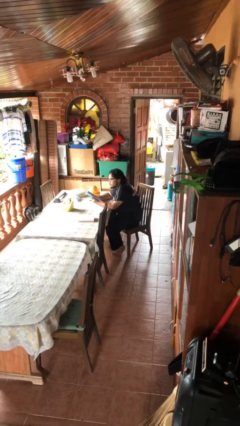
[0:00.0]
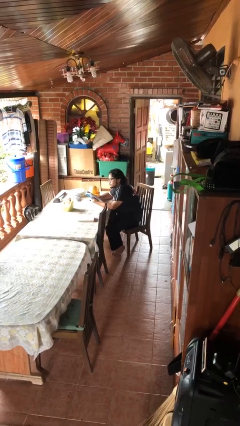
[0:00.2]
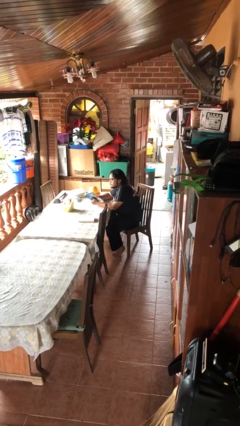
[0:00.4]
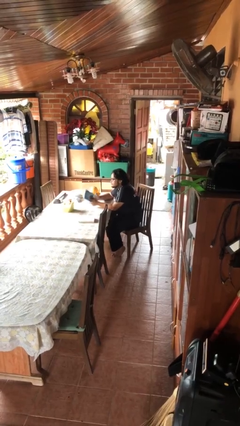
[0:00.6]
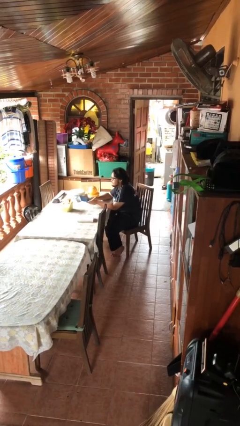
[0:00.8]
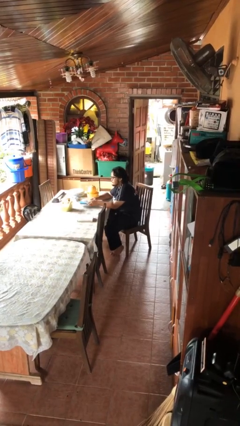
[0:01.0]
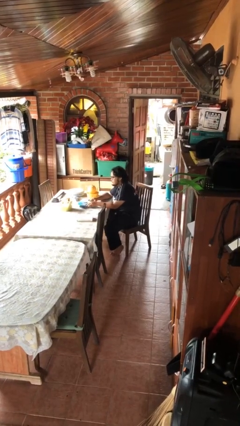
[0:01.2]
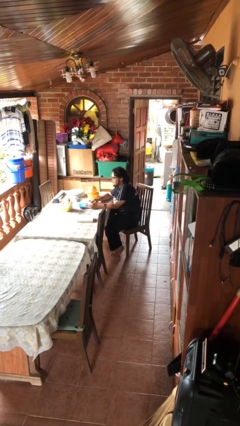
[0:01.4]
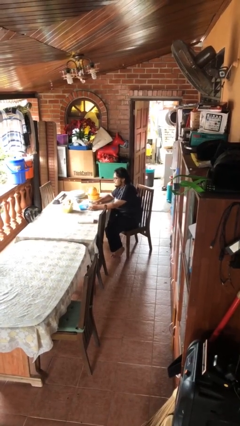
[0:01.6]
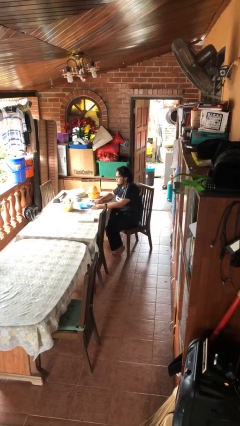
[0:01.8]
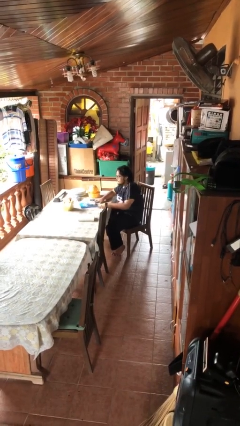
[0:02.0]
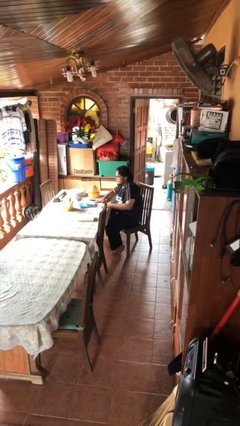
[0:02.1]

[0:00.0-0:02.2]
person puts down object on table

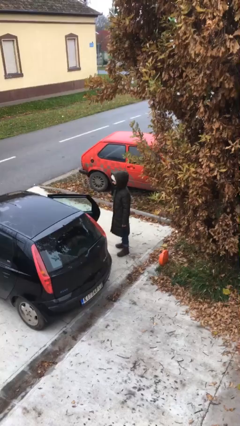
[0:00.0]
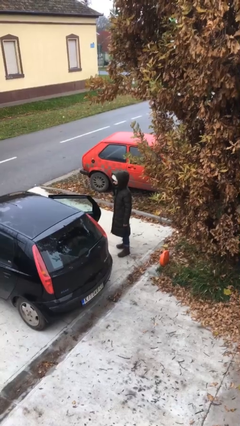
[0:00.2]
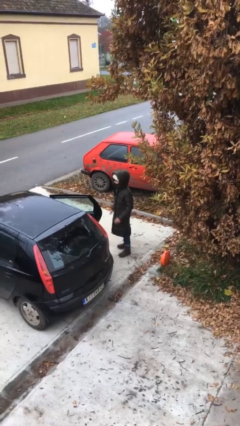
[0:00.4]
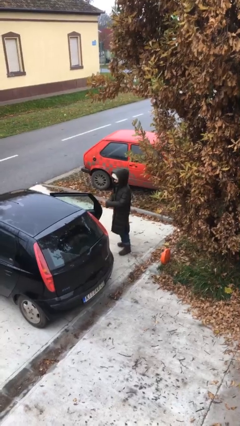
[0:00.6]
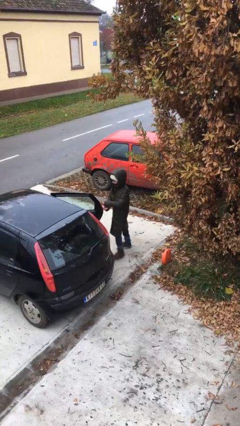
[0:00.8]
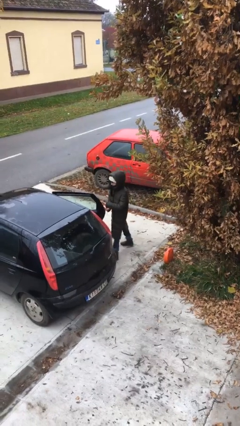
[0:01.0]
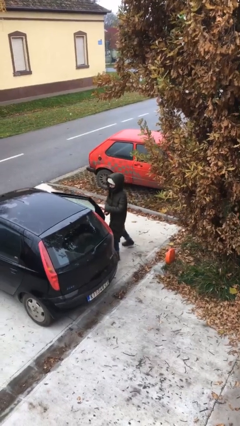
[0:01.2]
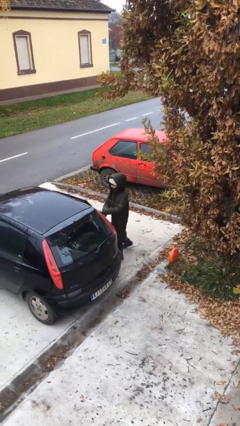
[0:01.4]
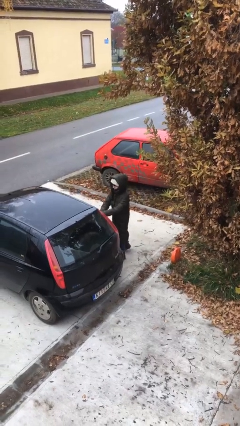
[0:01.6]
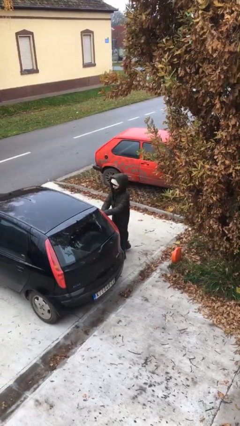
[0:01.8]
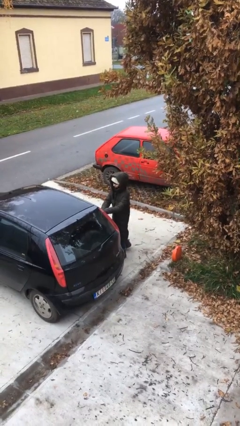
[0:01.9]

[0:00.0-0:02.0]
person closes car door

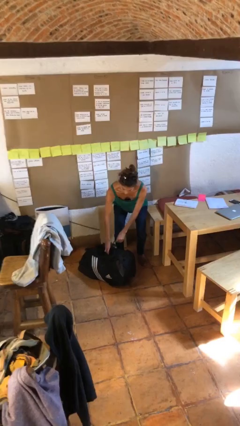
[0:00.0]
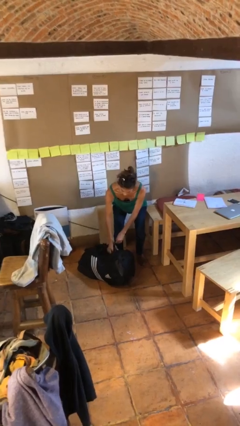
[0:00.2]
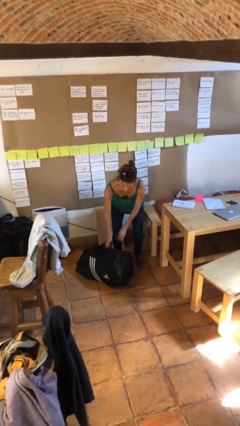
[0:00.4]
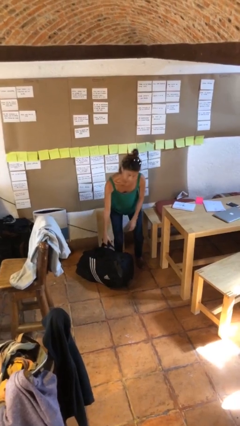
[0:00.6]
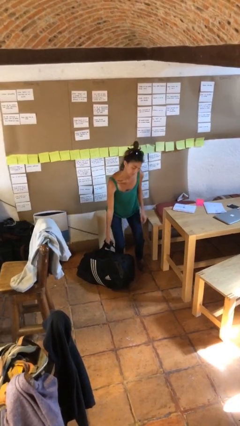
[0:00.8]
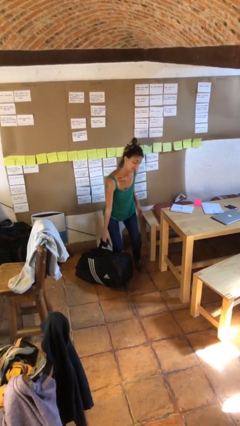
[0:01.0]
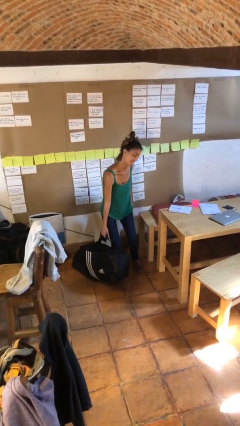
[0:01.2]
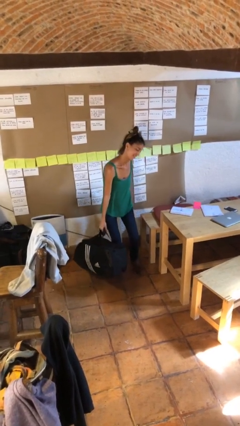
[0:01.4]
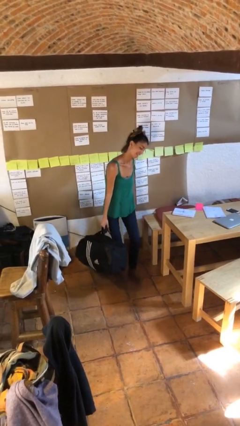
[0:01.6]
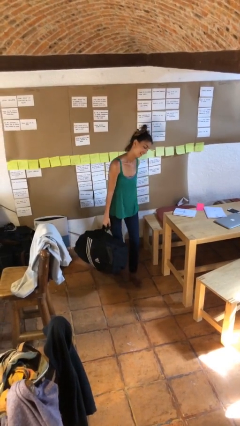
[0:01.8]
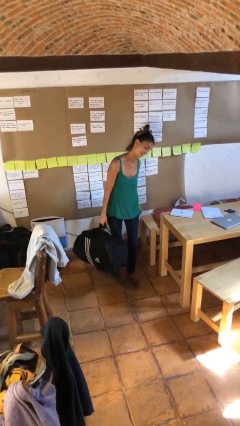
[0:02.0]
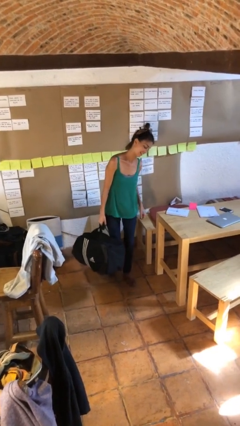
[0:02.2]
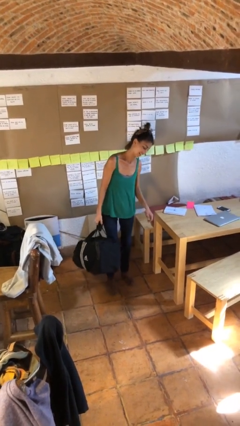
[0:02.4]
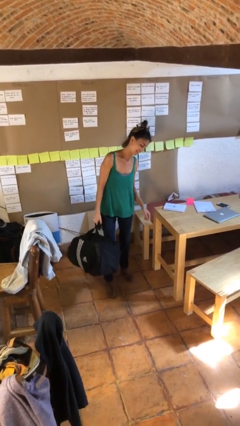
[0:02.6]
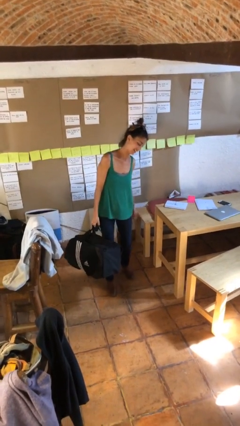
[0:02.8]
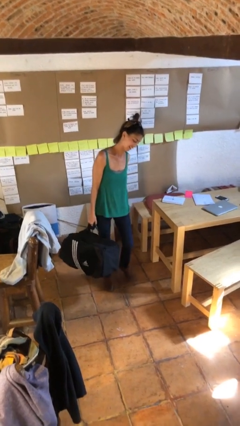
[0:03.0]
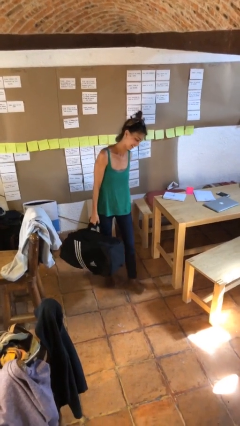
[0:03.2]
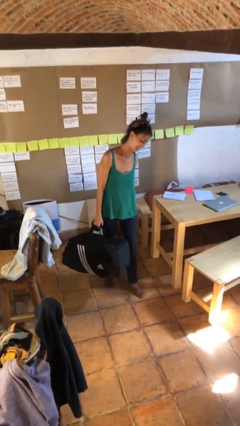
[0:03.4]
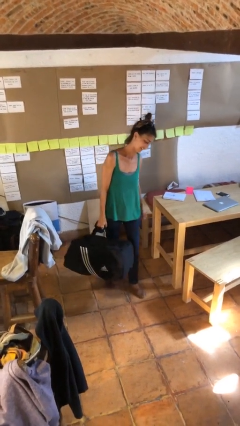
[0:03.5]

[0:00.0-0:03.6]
person carries heavy object

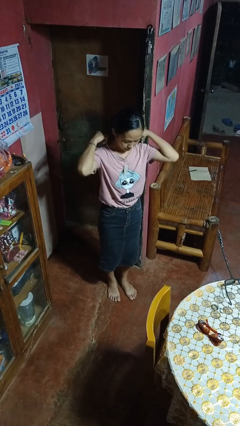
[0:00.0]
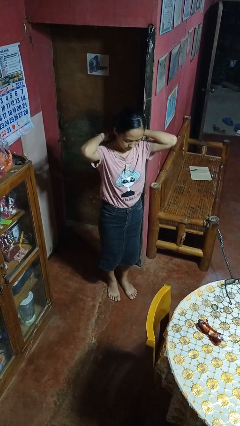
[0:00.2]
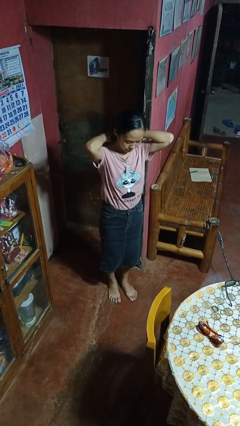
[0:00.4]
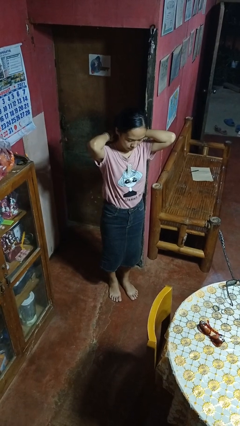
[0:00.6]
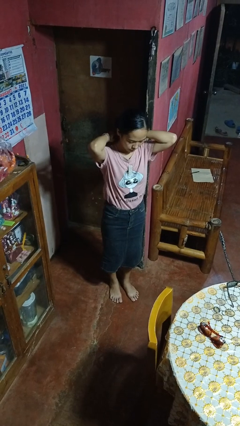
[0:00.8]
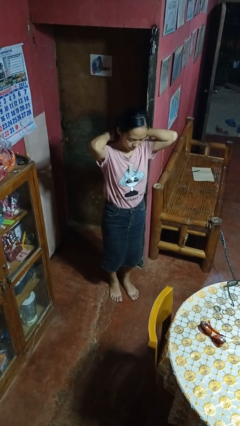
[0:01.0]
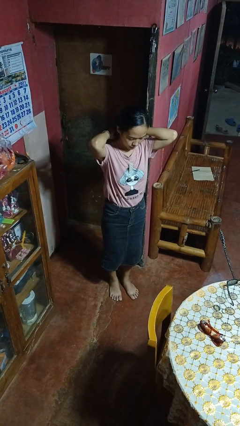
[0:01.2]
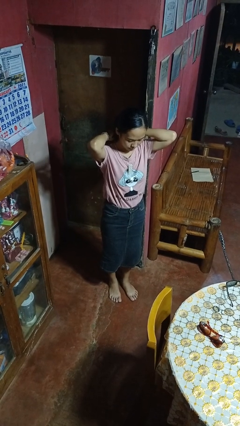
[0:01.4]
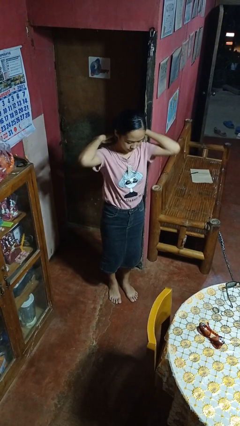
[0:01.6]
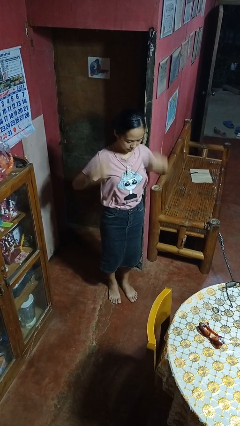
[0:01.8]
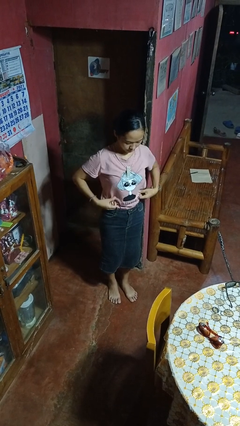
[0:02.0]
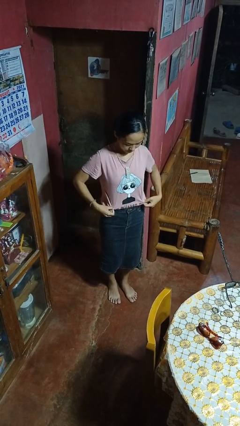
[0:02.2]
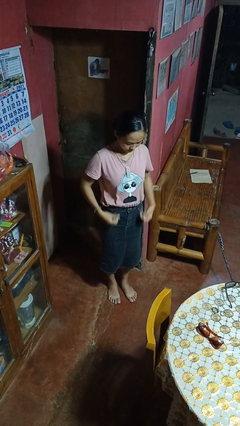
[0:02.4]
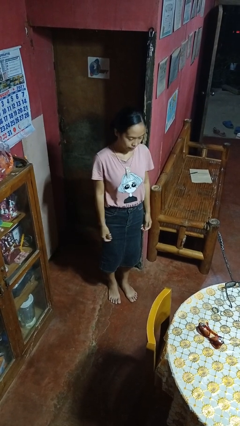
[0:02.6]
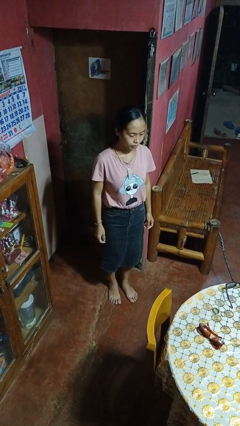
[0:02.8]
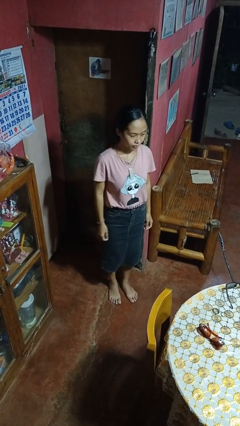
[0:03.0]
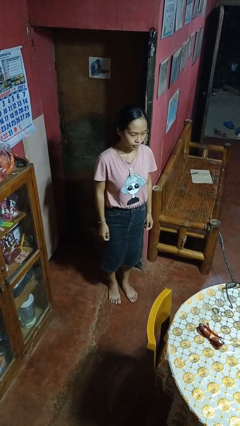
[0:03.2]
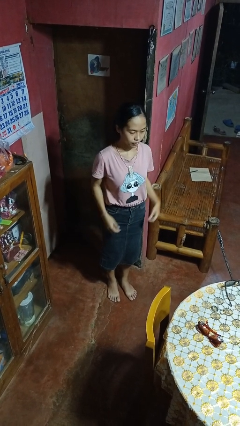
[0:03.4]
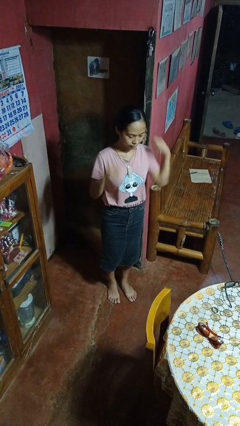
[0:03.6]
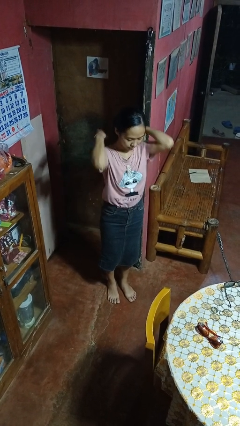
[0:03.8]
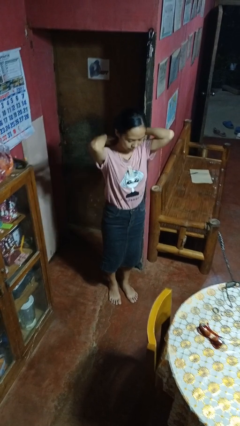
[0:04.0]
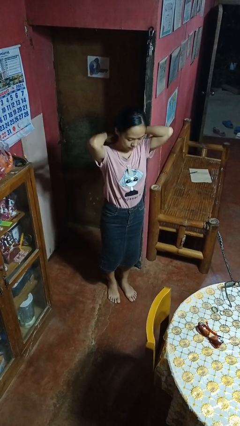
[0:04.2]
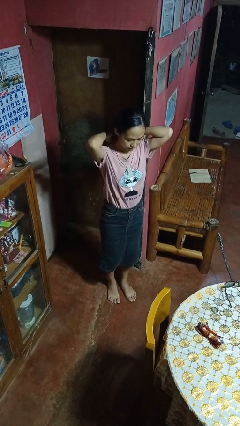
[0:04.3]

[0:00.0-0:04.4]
person puts on necklace

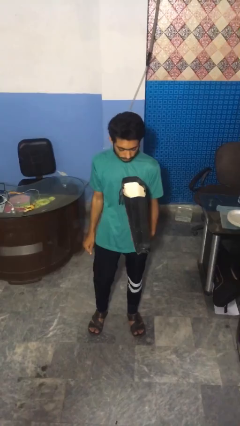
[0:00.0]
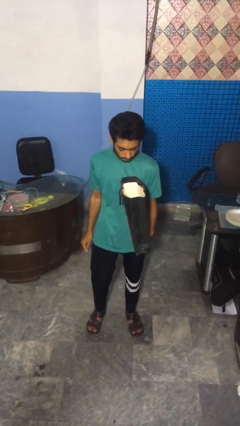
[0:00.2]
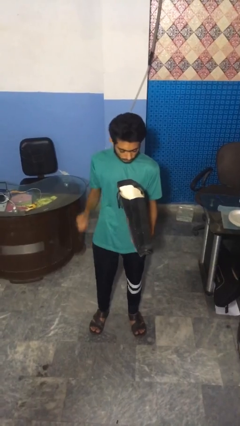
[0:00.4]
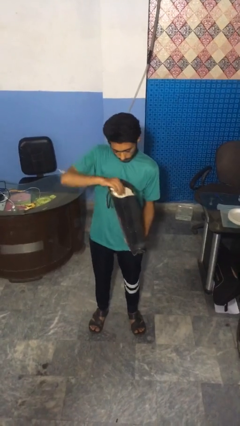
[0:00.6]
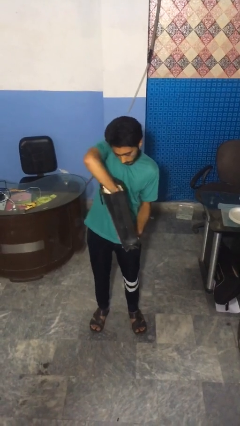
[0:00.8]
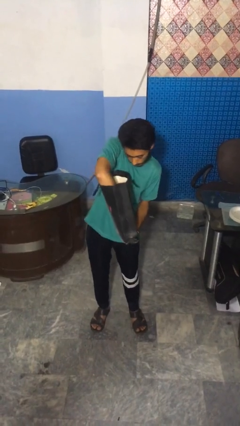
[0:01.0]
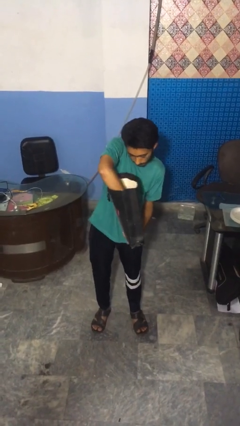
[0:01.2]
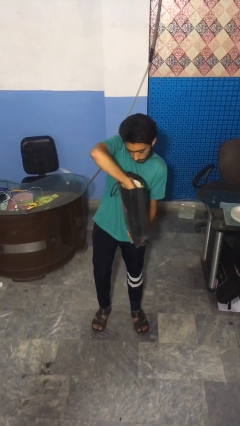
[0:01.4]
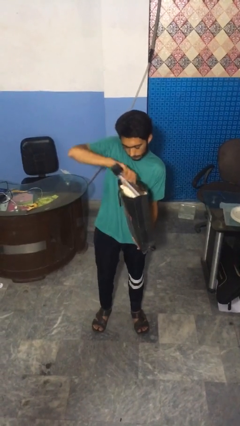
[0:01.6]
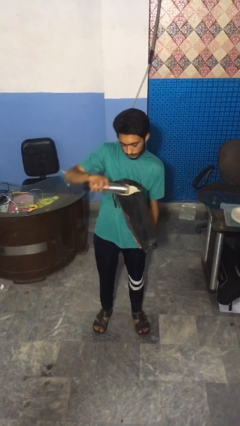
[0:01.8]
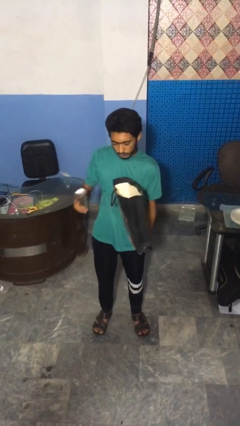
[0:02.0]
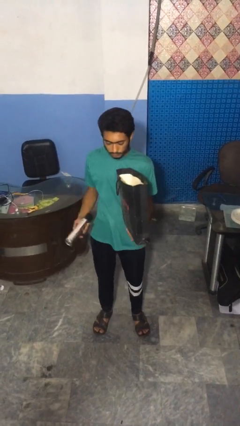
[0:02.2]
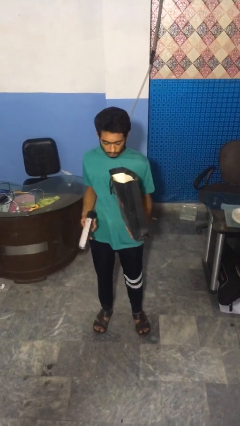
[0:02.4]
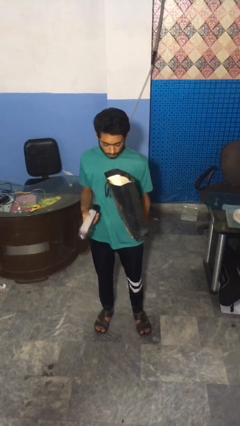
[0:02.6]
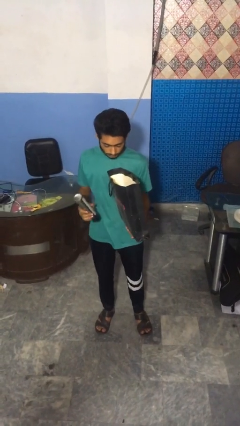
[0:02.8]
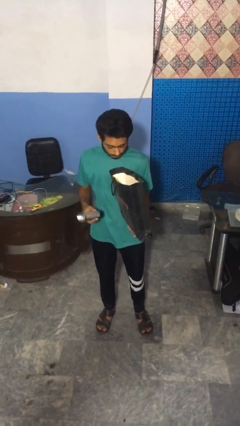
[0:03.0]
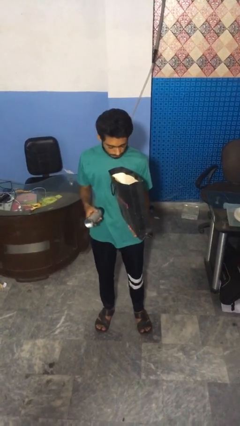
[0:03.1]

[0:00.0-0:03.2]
person takes object from bag

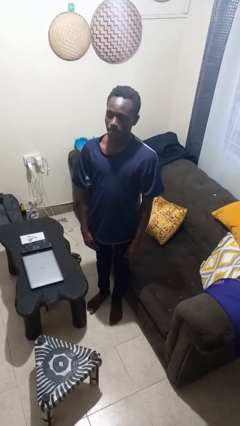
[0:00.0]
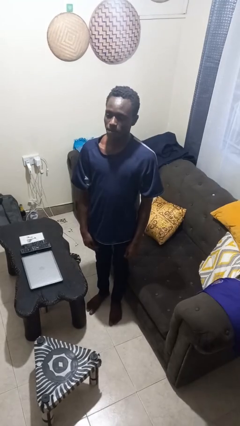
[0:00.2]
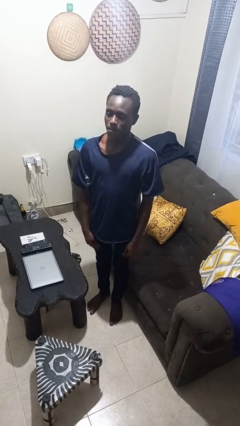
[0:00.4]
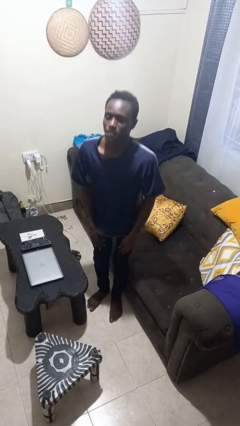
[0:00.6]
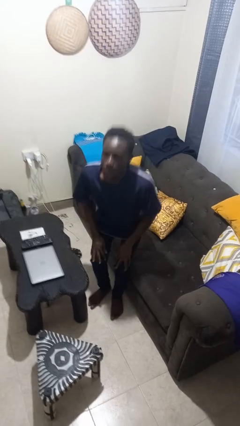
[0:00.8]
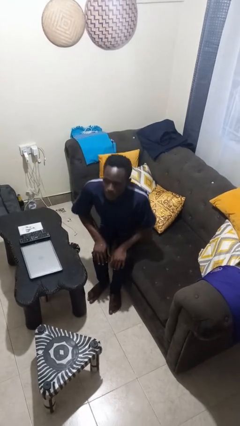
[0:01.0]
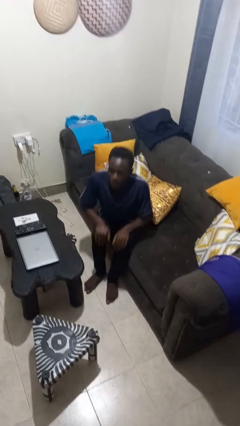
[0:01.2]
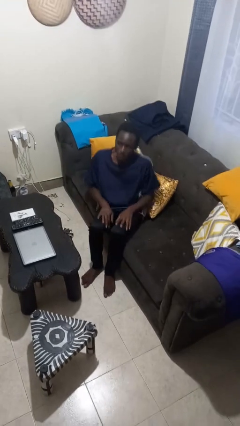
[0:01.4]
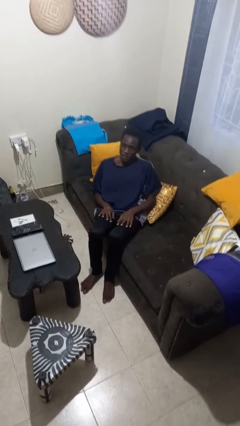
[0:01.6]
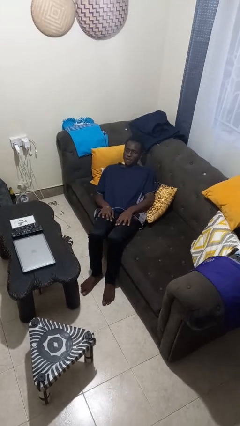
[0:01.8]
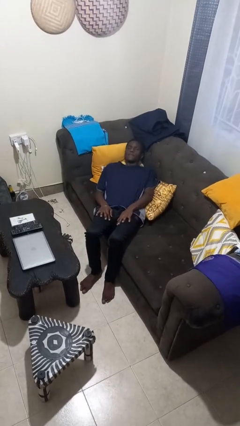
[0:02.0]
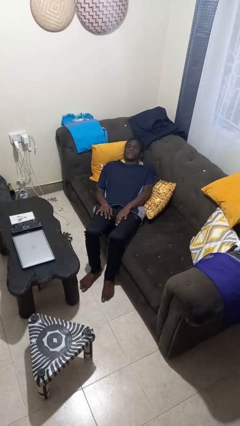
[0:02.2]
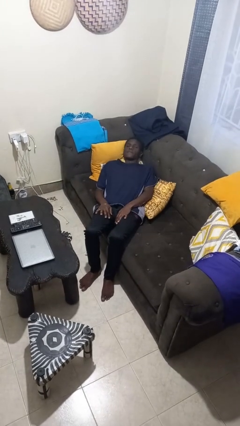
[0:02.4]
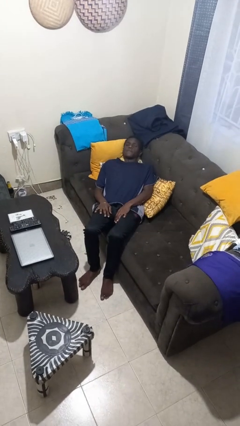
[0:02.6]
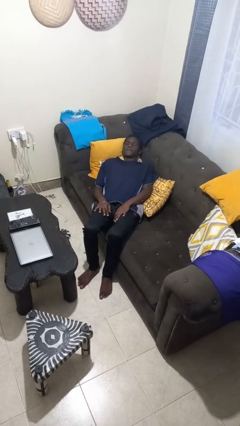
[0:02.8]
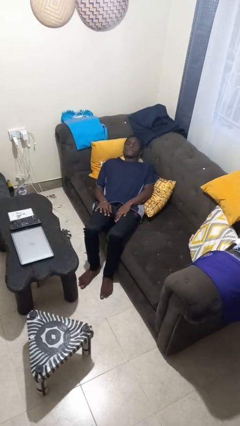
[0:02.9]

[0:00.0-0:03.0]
person lies down on couch
